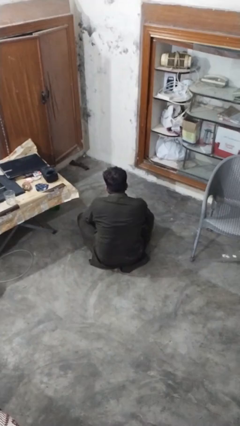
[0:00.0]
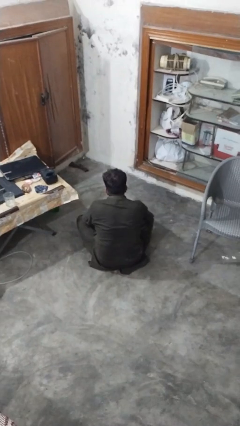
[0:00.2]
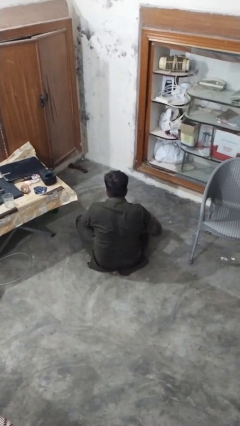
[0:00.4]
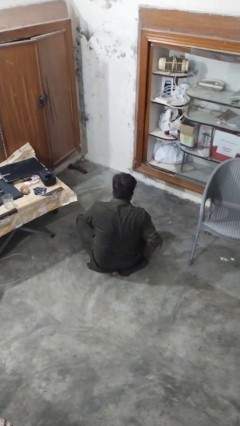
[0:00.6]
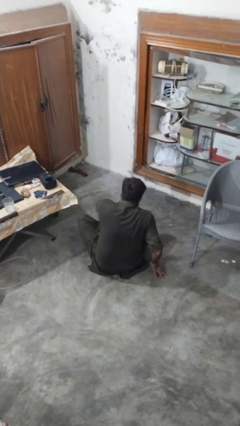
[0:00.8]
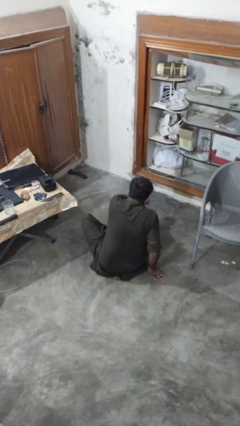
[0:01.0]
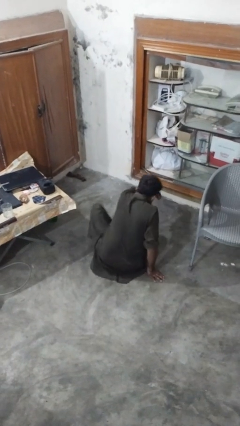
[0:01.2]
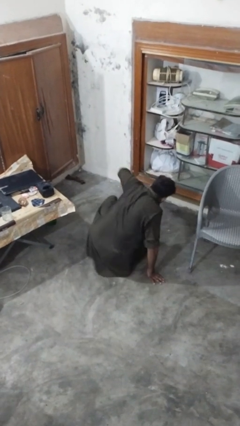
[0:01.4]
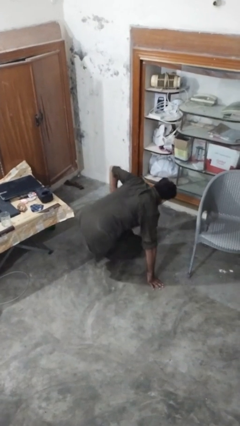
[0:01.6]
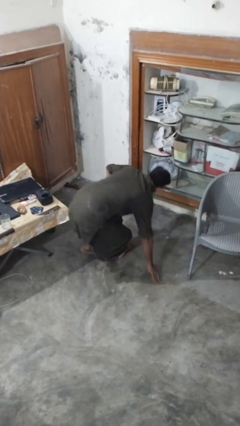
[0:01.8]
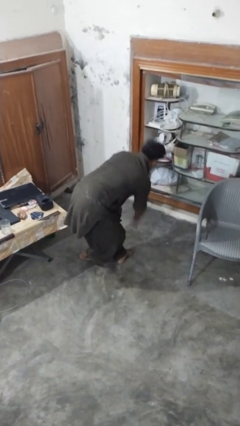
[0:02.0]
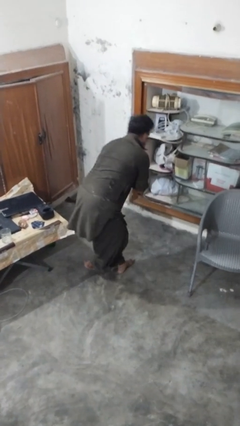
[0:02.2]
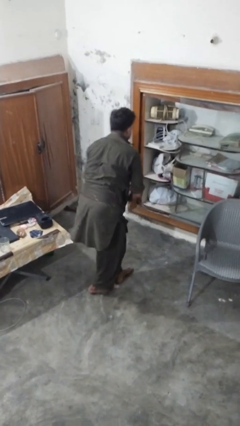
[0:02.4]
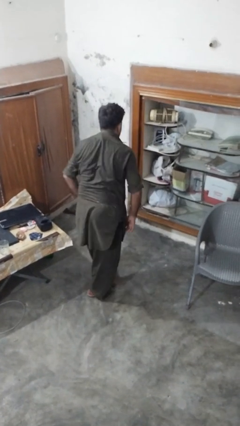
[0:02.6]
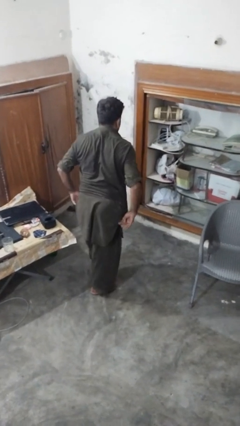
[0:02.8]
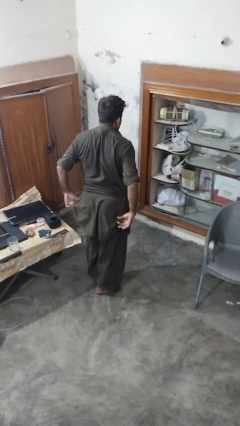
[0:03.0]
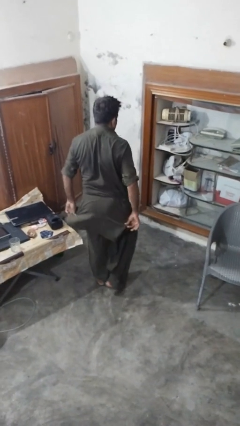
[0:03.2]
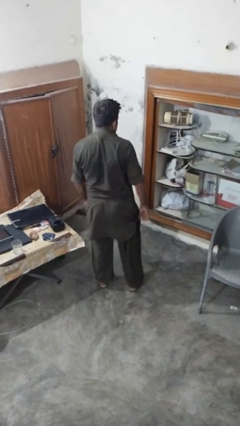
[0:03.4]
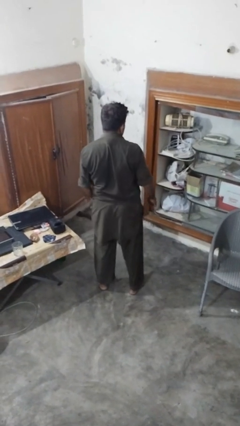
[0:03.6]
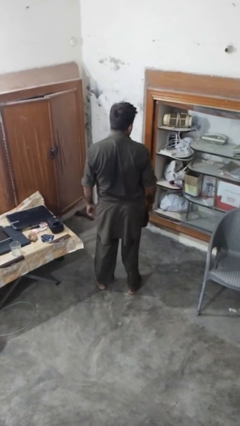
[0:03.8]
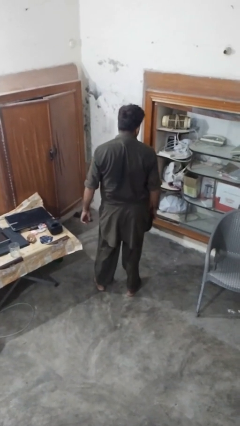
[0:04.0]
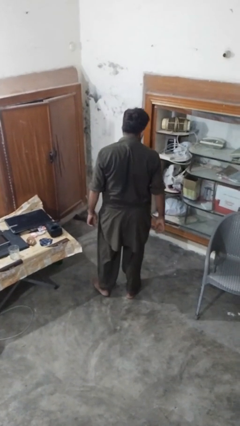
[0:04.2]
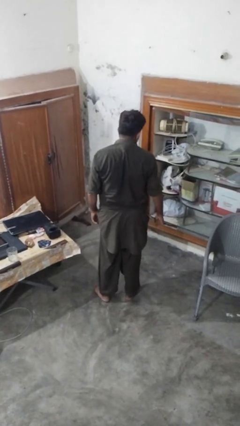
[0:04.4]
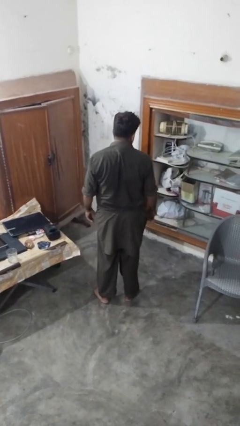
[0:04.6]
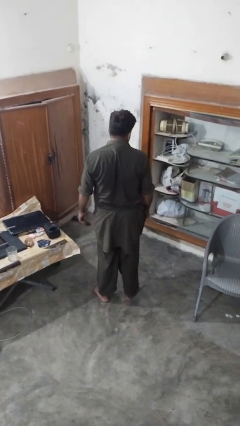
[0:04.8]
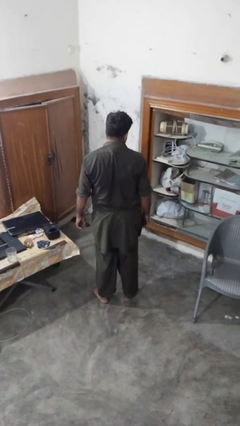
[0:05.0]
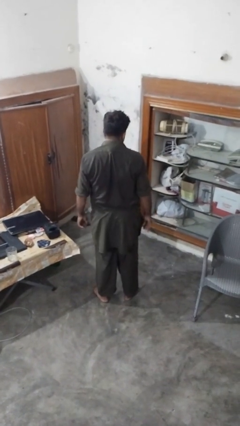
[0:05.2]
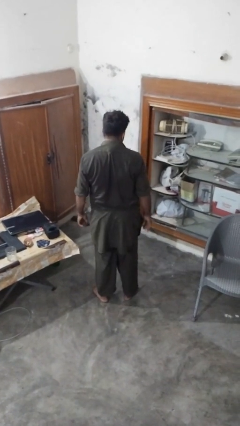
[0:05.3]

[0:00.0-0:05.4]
person stands up from floor

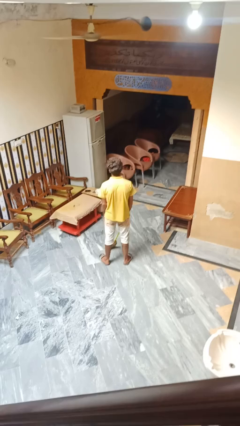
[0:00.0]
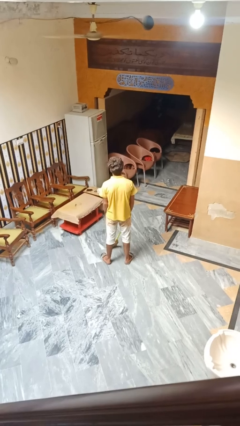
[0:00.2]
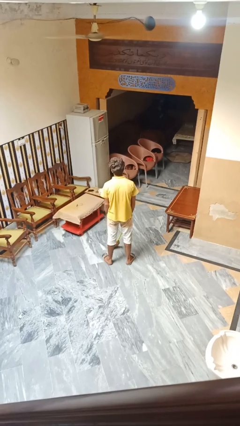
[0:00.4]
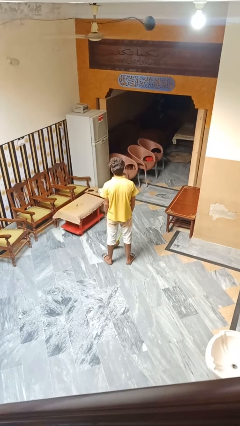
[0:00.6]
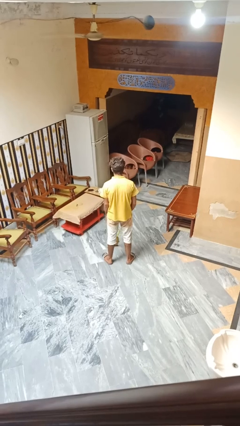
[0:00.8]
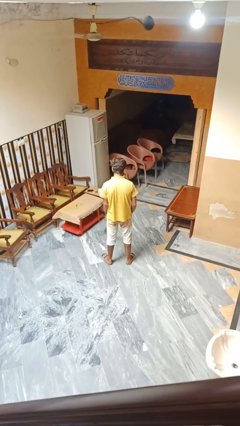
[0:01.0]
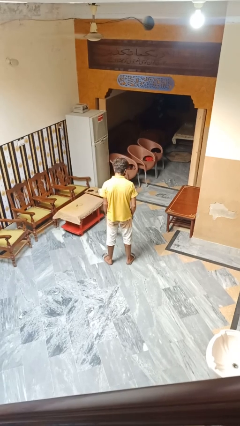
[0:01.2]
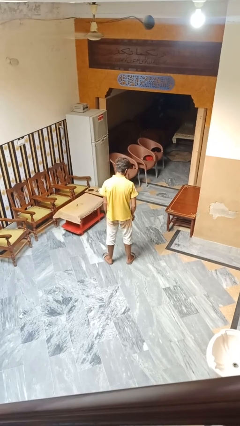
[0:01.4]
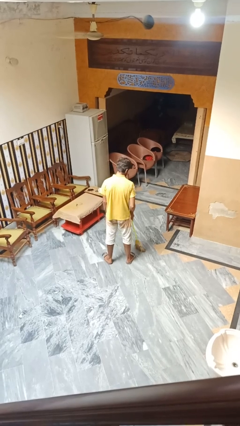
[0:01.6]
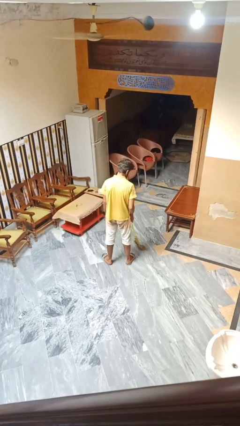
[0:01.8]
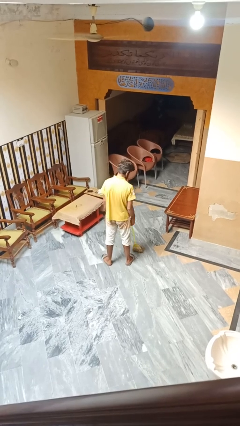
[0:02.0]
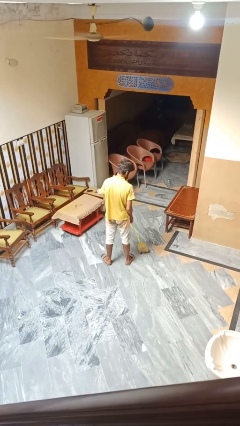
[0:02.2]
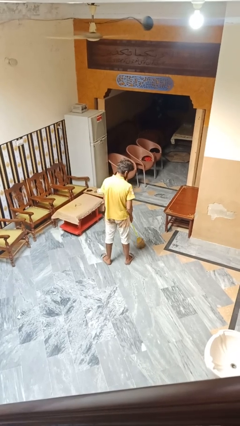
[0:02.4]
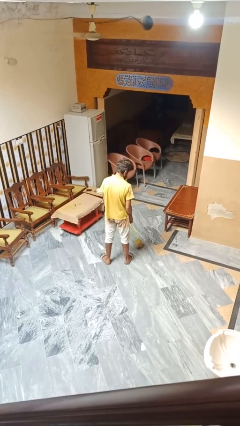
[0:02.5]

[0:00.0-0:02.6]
person mops

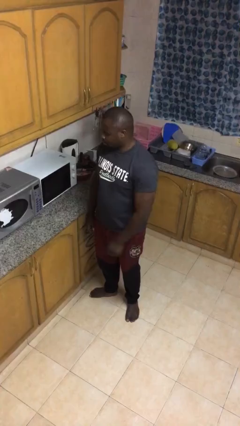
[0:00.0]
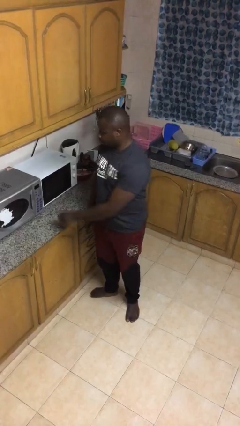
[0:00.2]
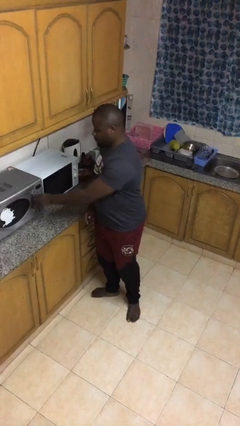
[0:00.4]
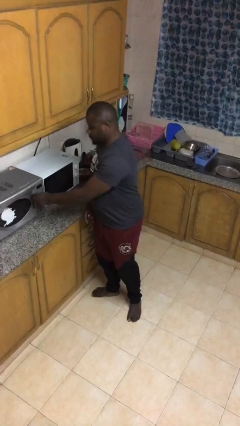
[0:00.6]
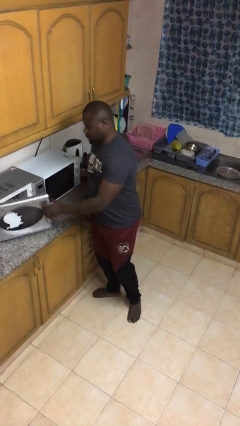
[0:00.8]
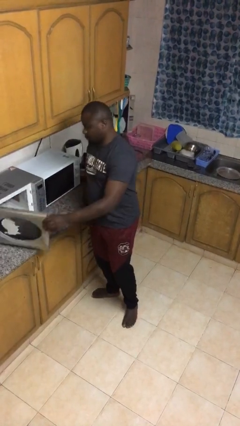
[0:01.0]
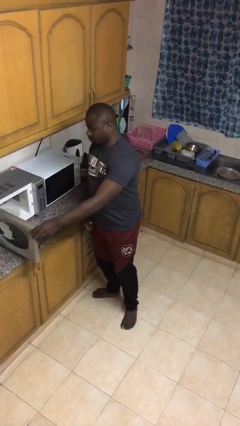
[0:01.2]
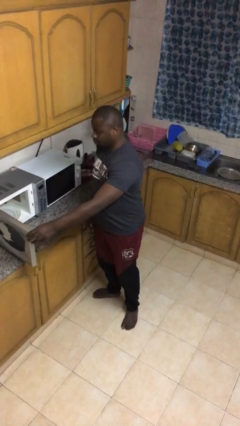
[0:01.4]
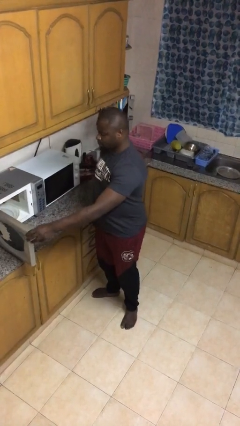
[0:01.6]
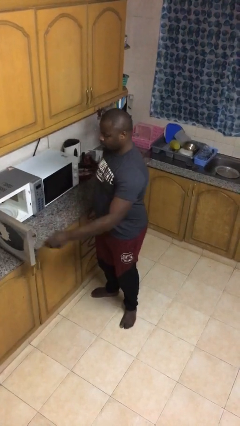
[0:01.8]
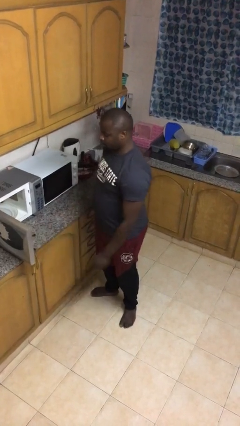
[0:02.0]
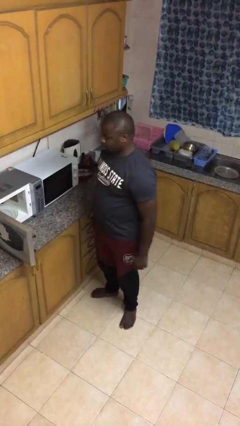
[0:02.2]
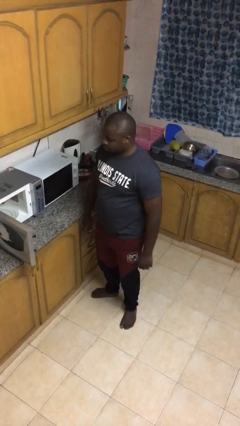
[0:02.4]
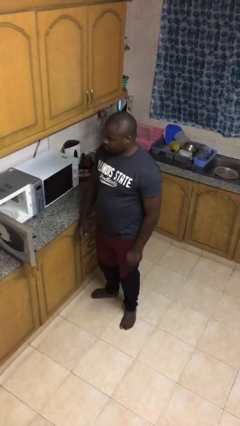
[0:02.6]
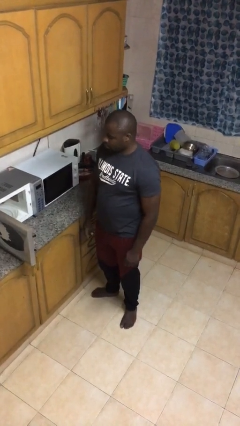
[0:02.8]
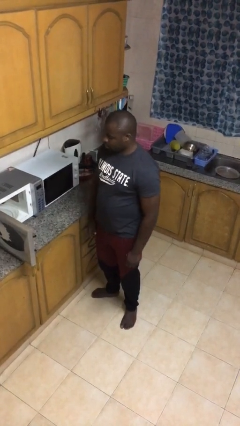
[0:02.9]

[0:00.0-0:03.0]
person opens microwave

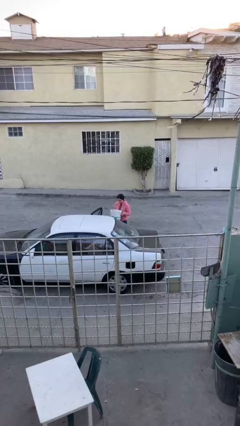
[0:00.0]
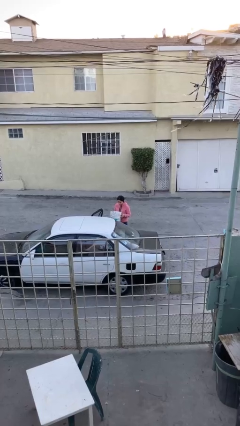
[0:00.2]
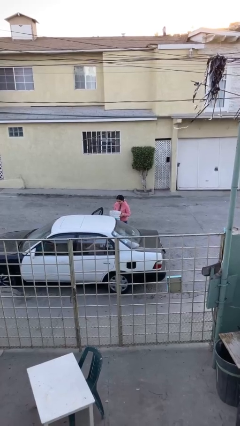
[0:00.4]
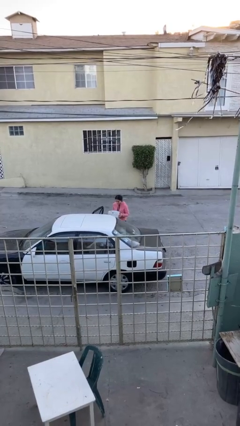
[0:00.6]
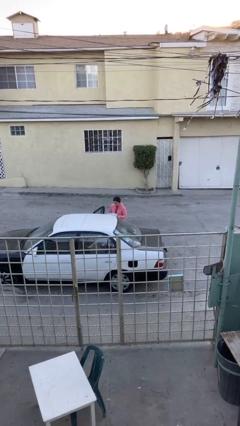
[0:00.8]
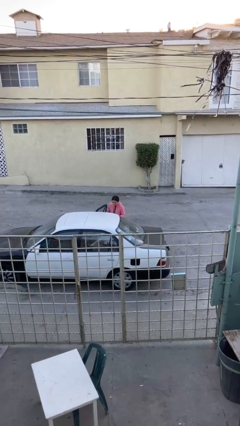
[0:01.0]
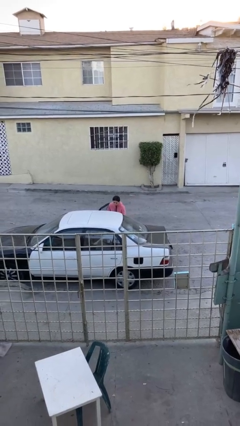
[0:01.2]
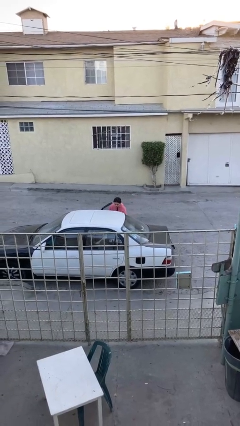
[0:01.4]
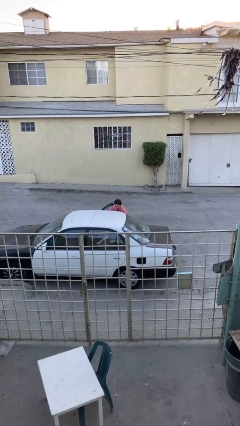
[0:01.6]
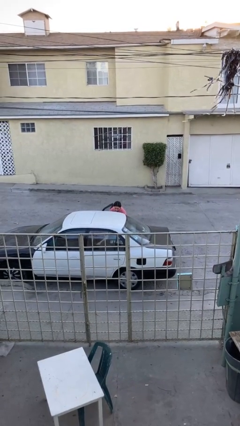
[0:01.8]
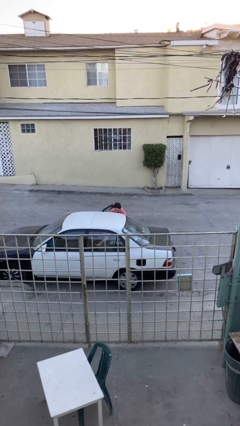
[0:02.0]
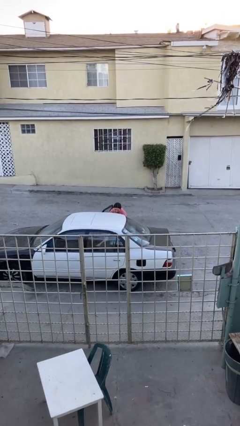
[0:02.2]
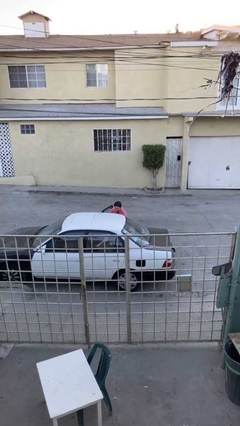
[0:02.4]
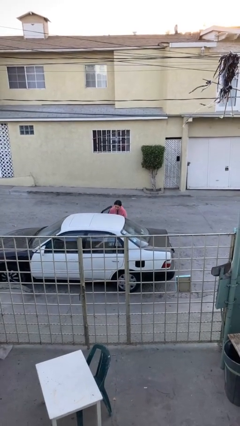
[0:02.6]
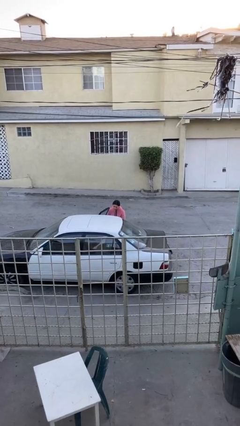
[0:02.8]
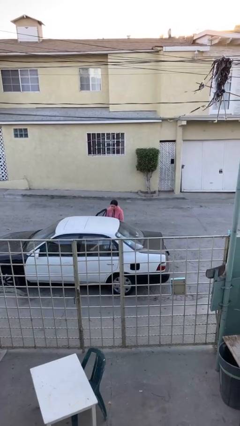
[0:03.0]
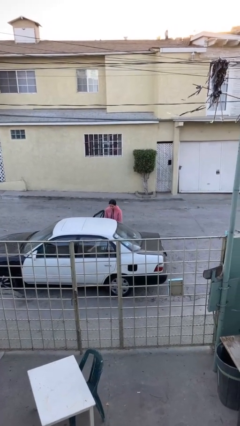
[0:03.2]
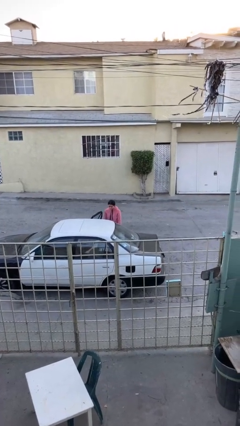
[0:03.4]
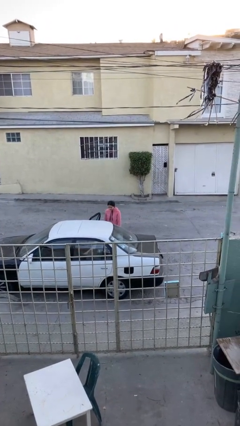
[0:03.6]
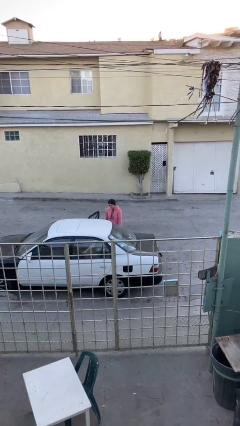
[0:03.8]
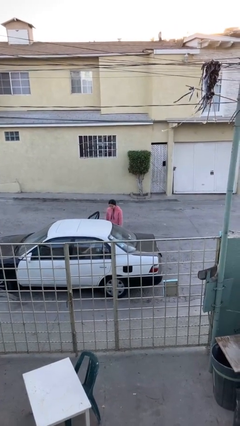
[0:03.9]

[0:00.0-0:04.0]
person loads car

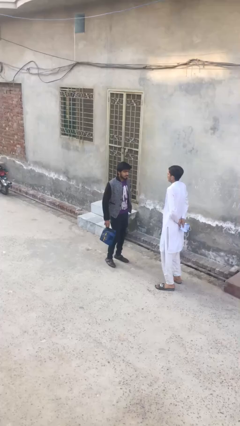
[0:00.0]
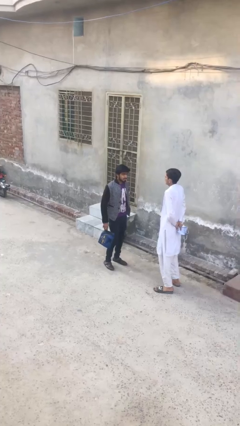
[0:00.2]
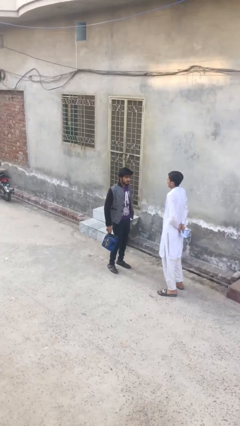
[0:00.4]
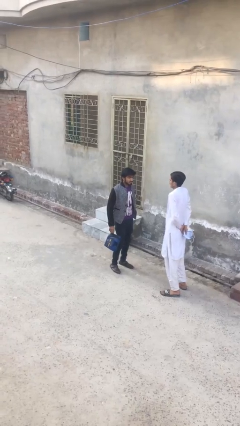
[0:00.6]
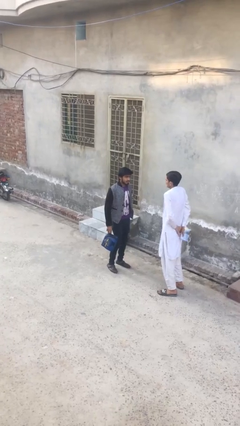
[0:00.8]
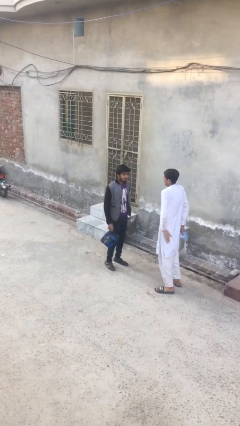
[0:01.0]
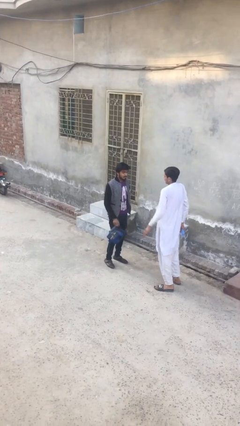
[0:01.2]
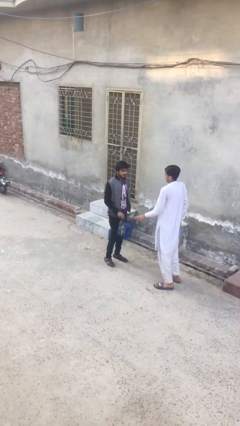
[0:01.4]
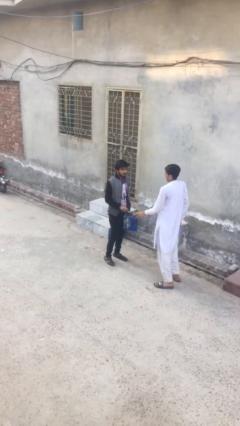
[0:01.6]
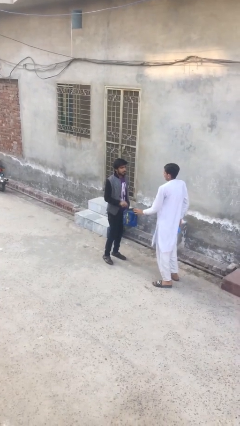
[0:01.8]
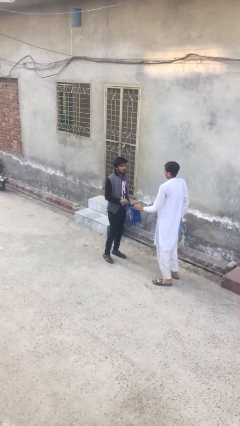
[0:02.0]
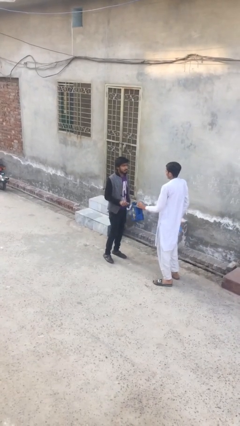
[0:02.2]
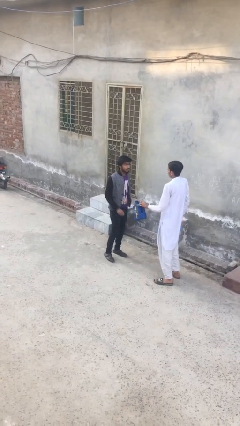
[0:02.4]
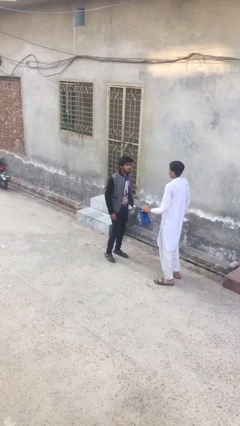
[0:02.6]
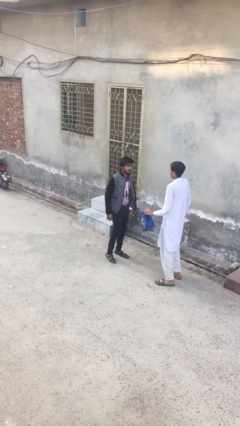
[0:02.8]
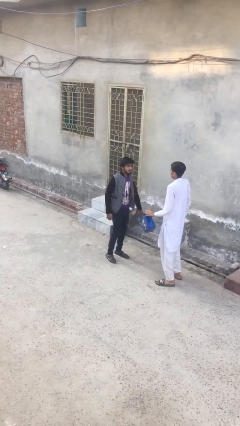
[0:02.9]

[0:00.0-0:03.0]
person transfers object to person
